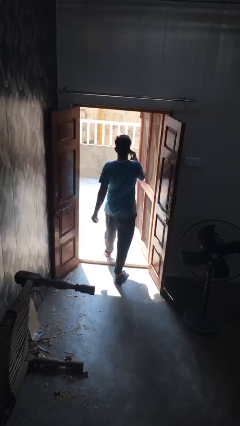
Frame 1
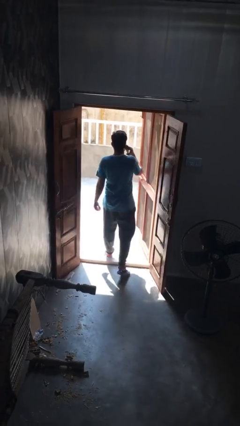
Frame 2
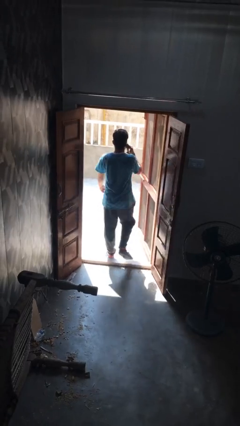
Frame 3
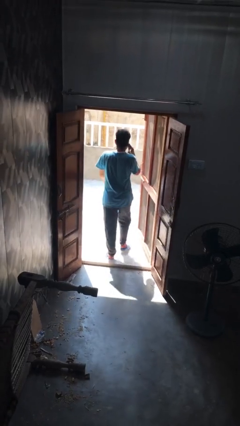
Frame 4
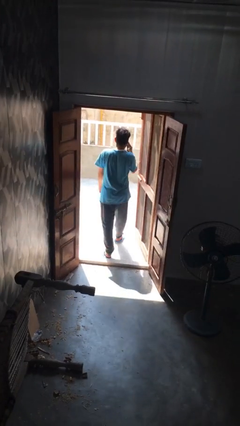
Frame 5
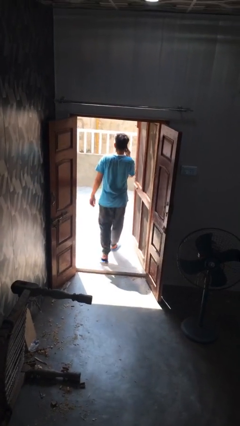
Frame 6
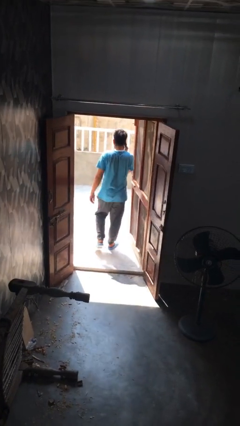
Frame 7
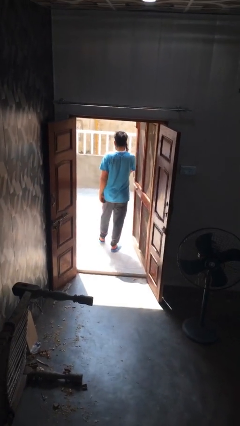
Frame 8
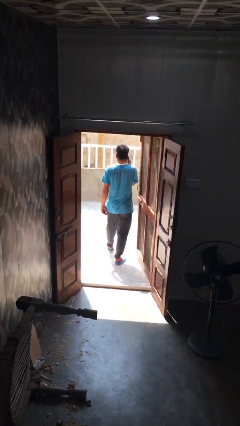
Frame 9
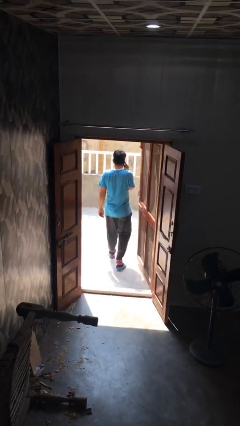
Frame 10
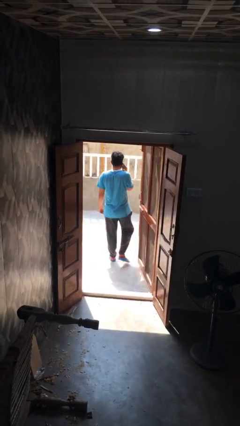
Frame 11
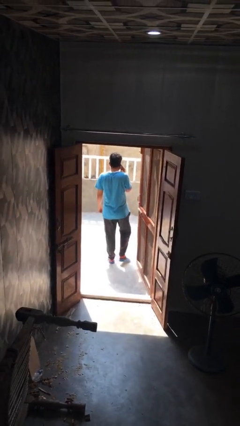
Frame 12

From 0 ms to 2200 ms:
person exits scene through structure

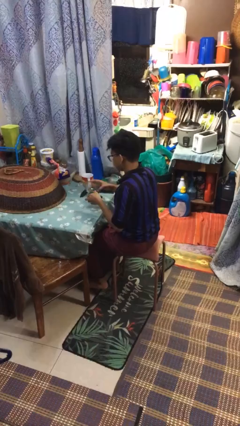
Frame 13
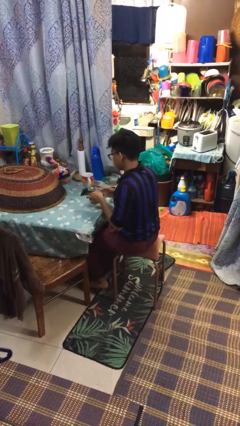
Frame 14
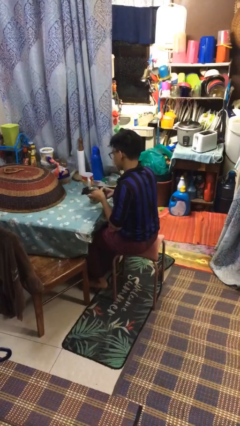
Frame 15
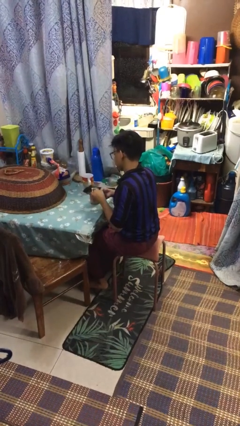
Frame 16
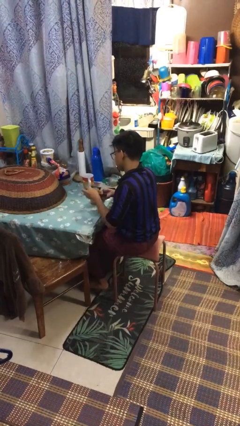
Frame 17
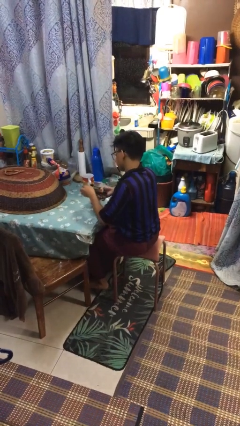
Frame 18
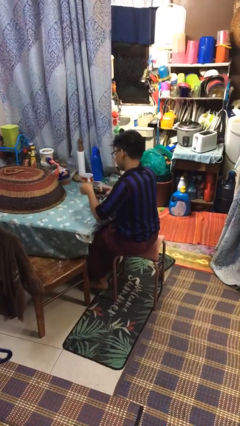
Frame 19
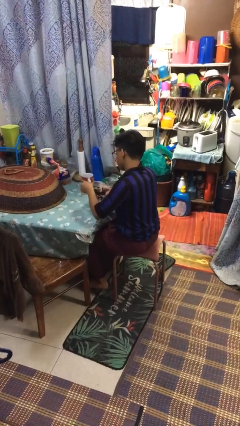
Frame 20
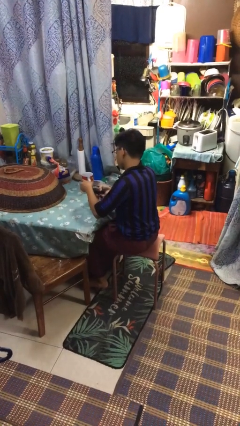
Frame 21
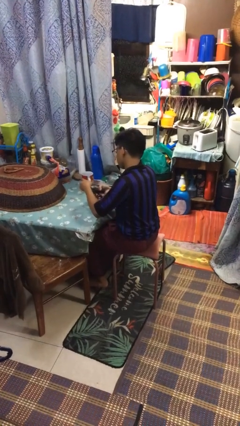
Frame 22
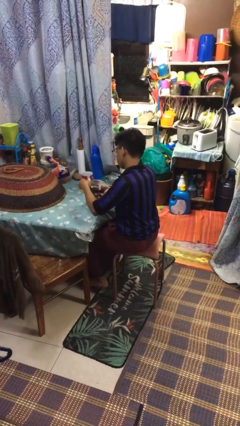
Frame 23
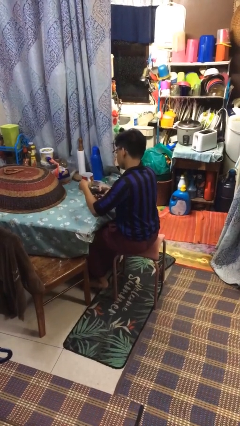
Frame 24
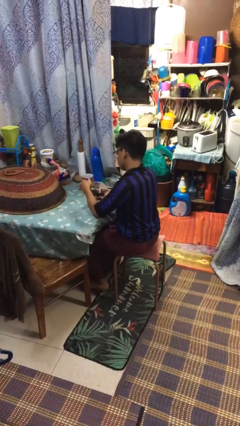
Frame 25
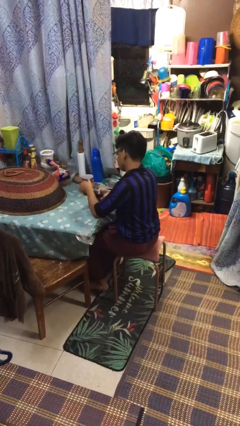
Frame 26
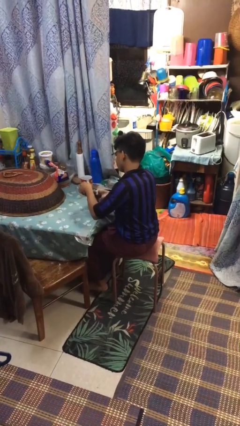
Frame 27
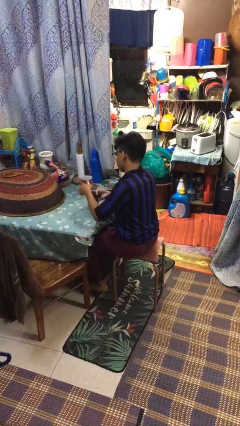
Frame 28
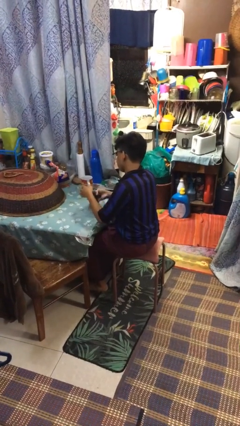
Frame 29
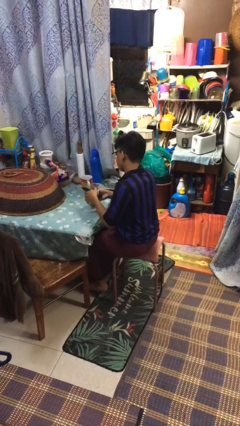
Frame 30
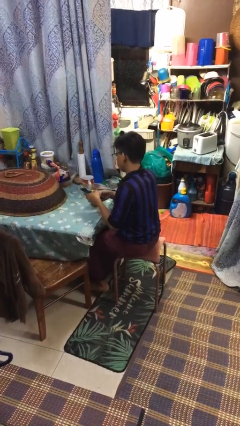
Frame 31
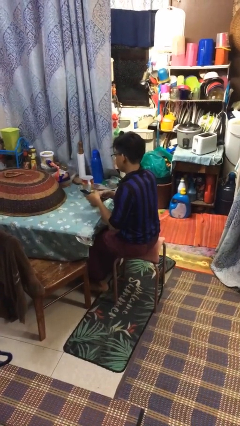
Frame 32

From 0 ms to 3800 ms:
person opens can with can opener

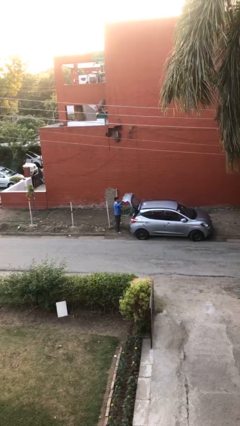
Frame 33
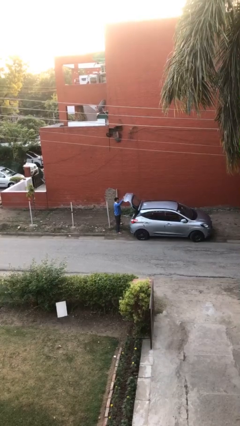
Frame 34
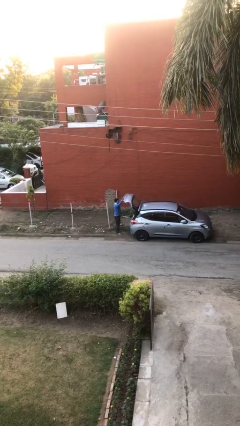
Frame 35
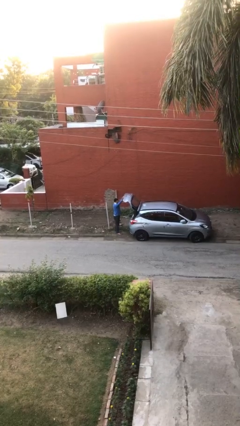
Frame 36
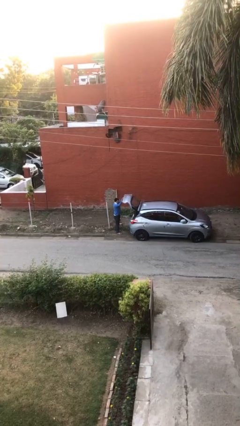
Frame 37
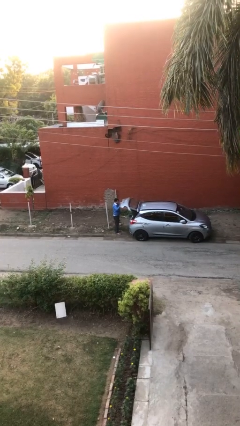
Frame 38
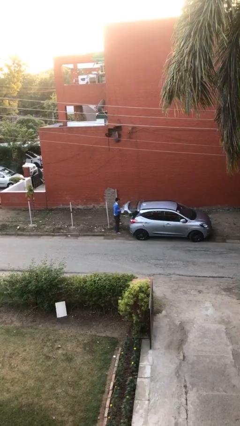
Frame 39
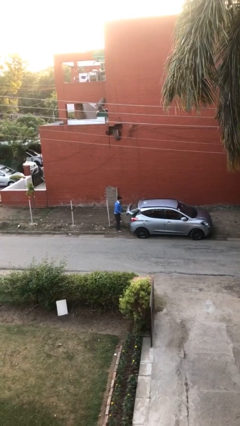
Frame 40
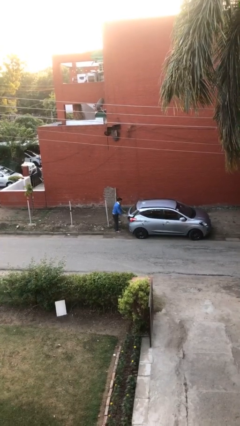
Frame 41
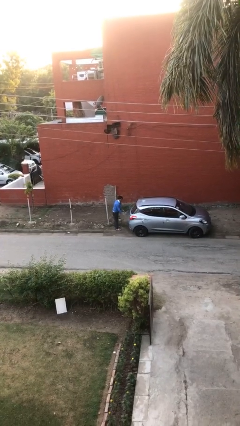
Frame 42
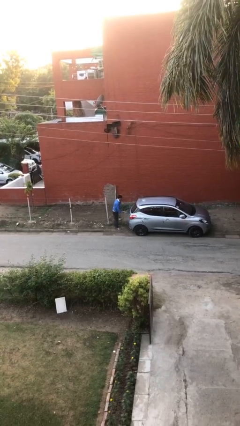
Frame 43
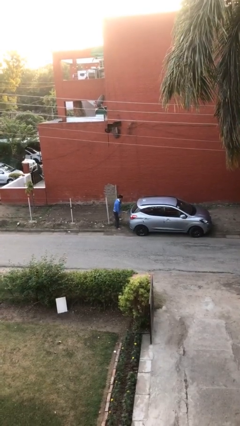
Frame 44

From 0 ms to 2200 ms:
person closes car trunk

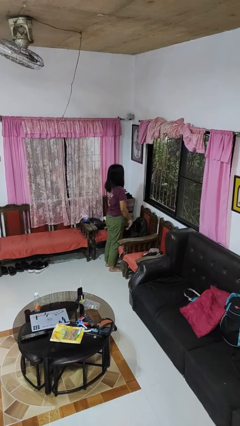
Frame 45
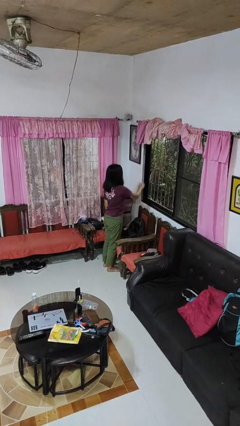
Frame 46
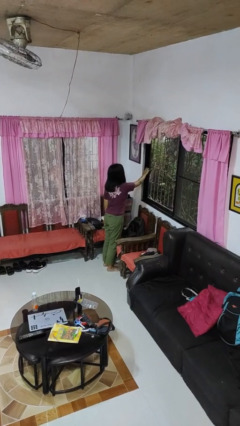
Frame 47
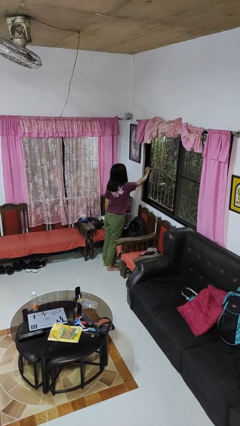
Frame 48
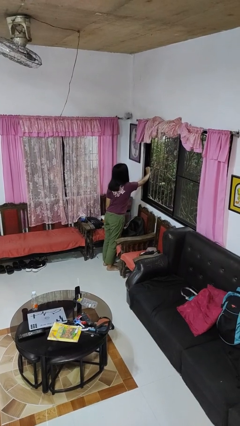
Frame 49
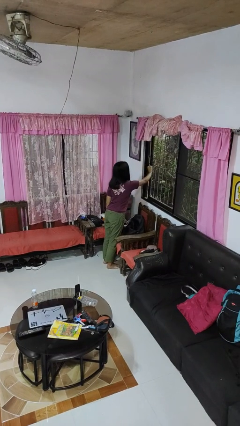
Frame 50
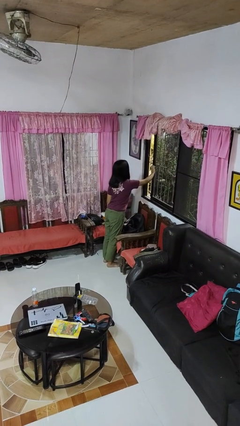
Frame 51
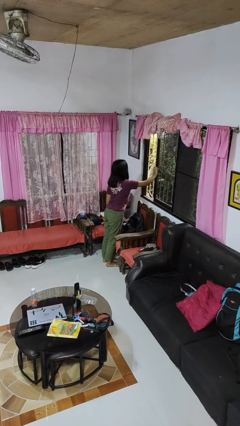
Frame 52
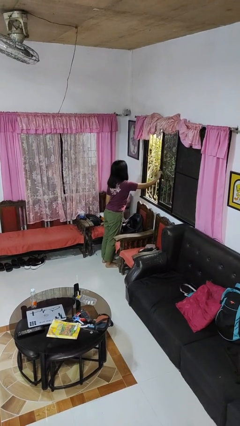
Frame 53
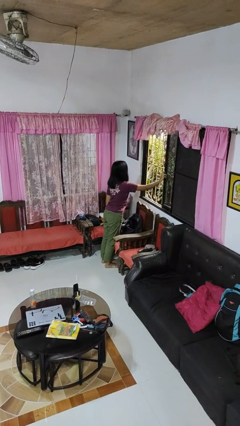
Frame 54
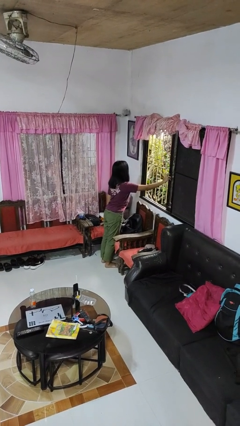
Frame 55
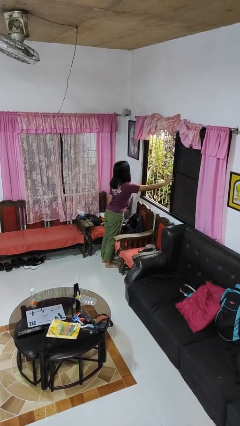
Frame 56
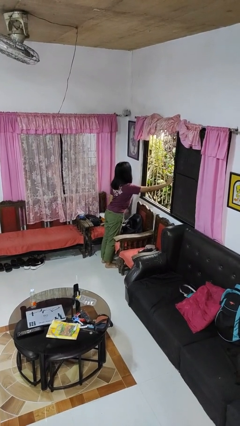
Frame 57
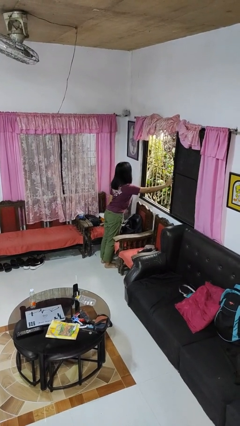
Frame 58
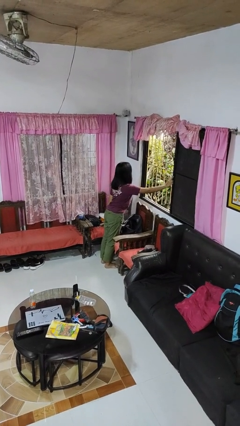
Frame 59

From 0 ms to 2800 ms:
person opens home window

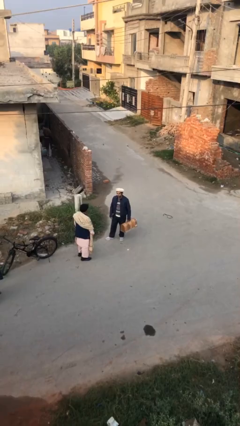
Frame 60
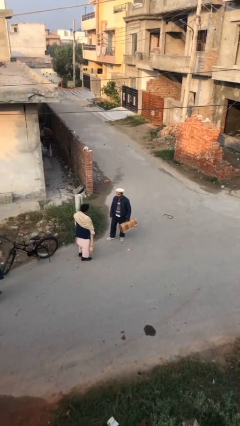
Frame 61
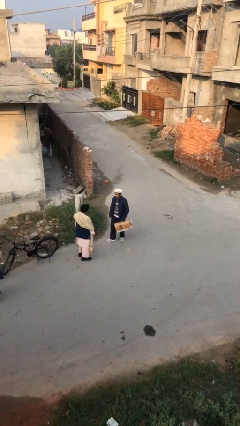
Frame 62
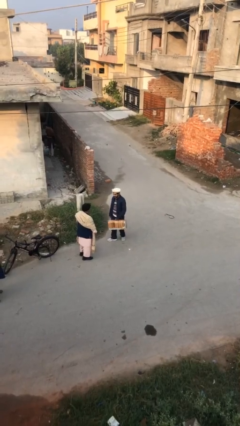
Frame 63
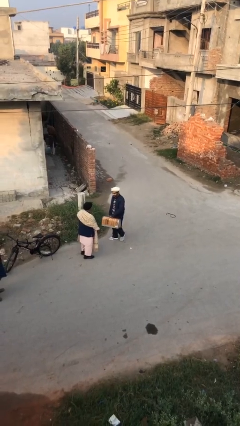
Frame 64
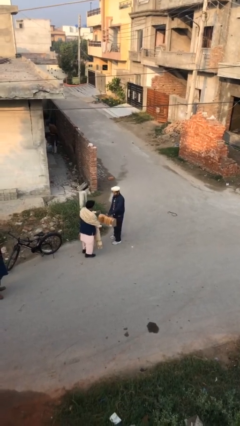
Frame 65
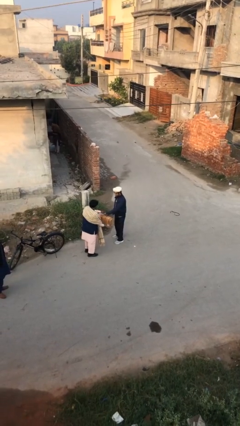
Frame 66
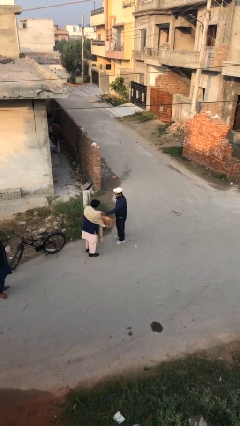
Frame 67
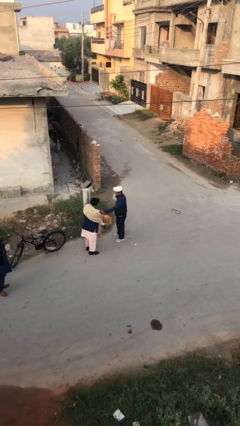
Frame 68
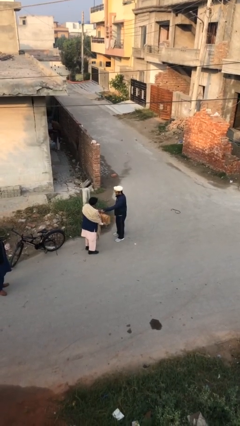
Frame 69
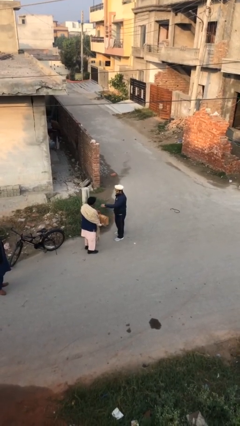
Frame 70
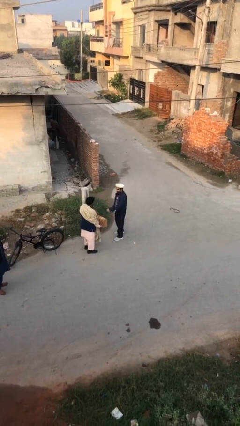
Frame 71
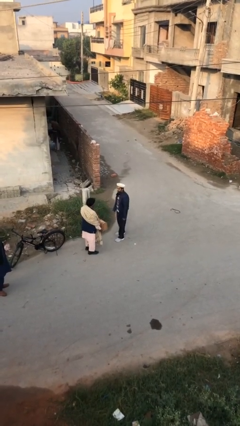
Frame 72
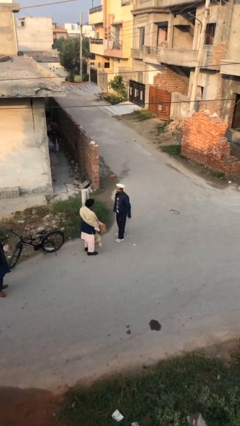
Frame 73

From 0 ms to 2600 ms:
person transfers object to person

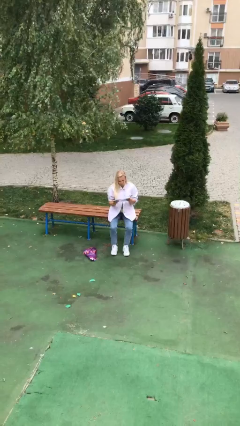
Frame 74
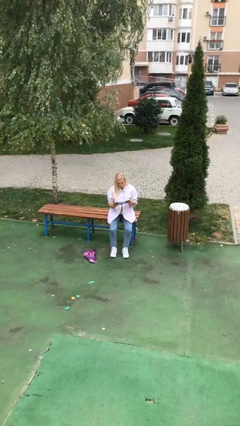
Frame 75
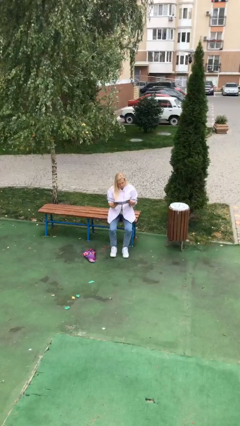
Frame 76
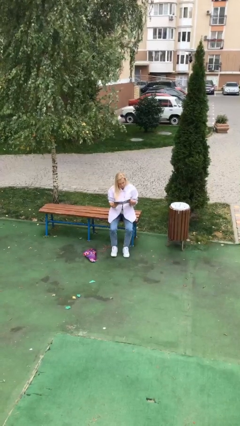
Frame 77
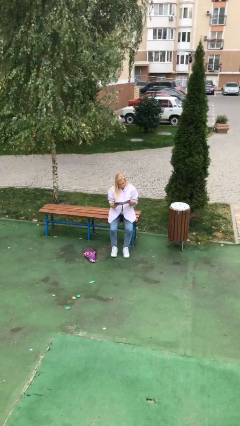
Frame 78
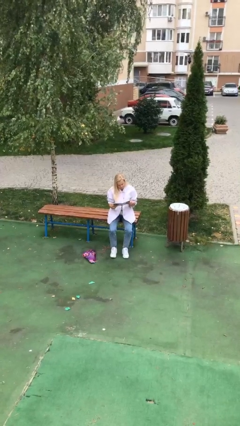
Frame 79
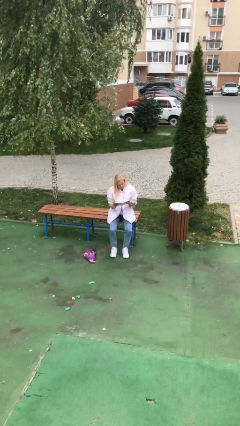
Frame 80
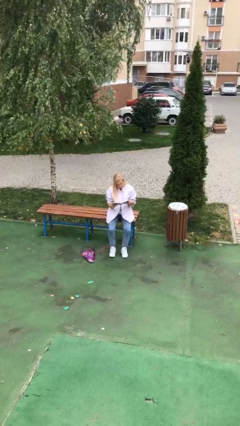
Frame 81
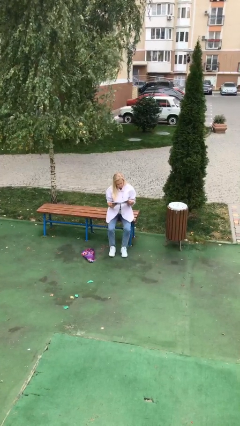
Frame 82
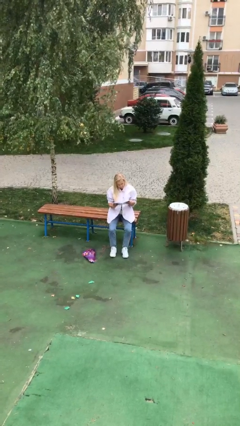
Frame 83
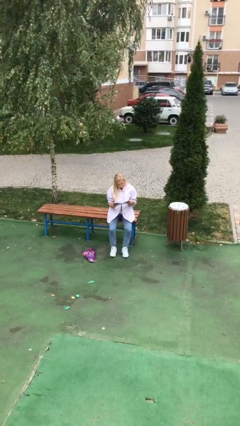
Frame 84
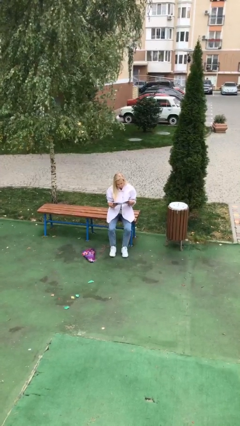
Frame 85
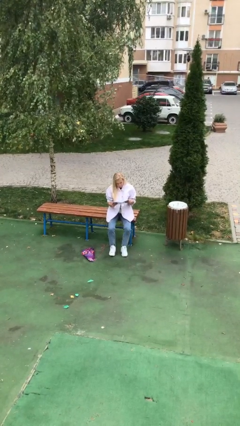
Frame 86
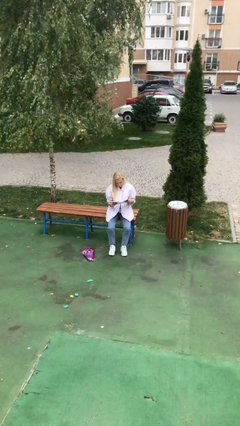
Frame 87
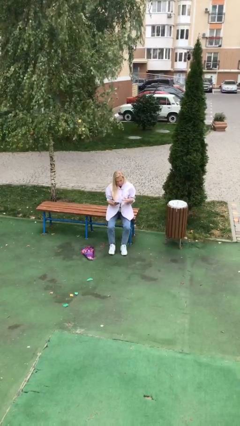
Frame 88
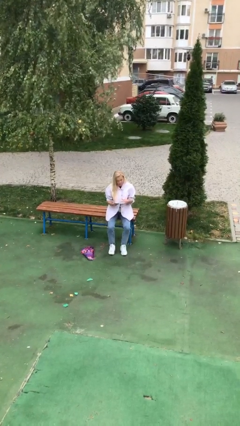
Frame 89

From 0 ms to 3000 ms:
person reads document

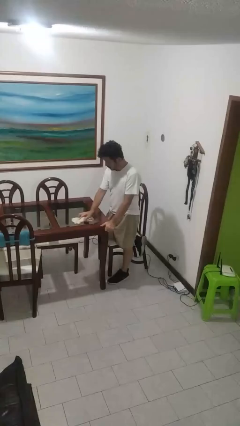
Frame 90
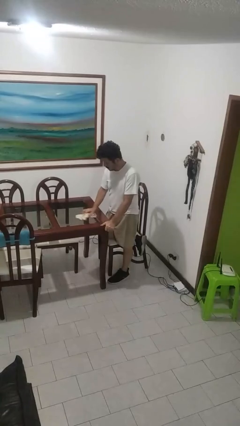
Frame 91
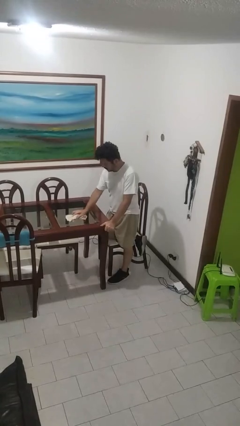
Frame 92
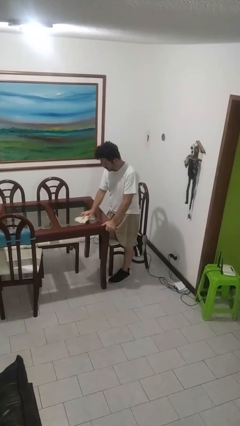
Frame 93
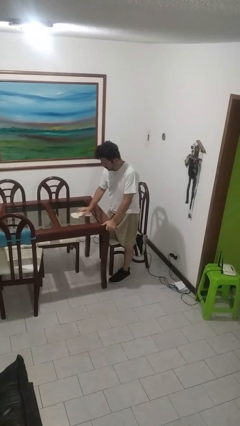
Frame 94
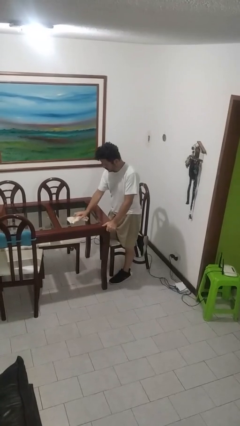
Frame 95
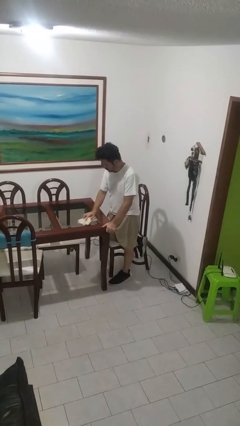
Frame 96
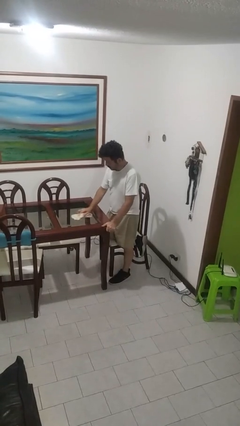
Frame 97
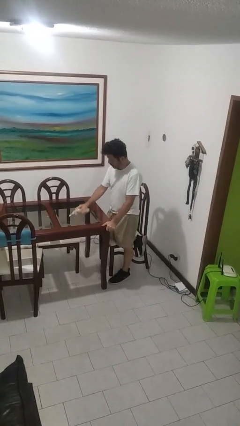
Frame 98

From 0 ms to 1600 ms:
person cleans table with rag
